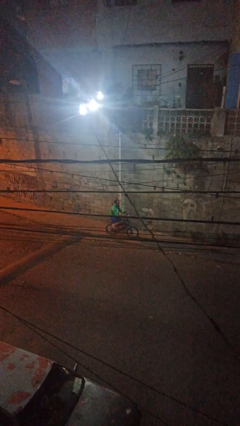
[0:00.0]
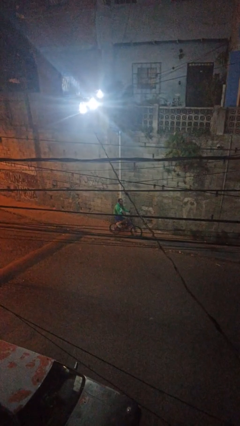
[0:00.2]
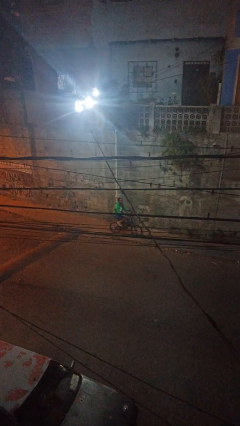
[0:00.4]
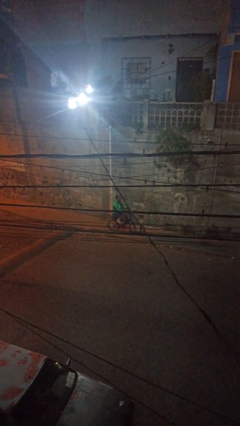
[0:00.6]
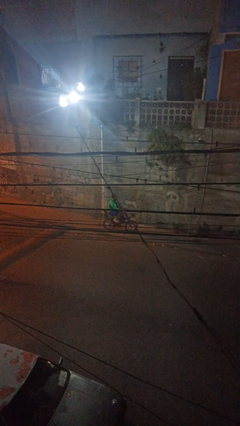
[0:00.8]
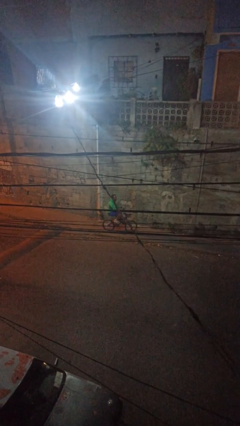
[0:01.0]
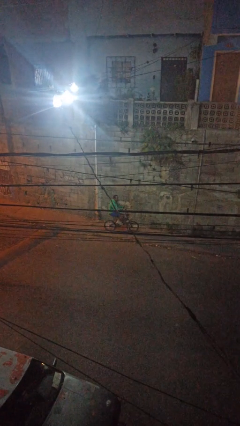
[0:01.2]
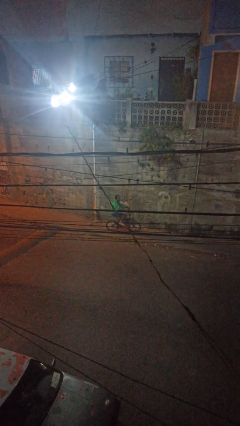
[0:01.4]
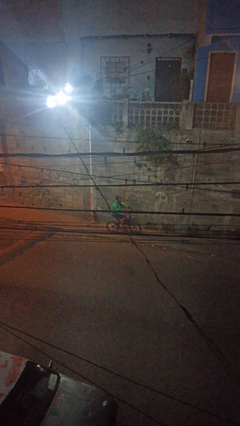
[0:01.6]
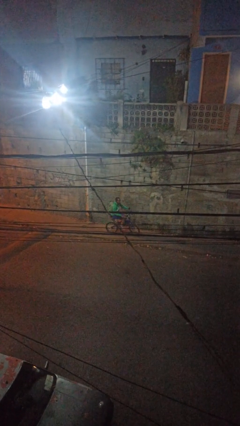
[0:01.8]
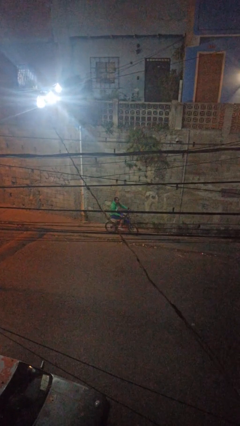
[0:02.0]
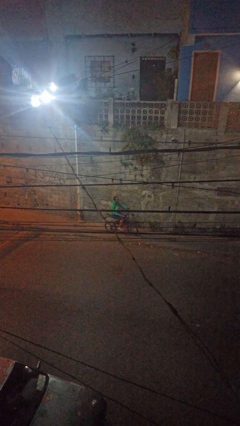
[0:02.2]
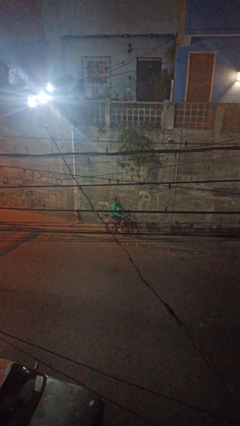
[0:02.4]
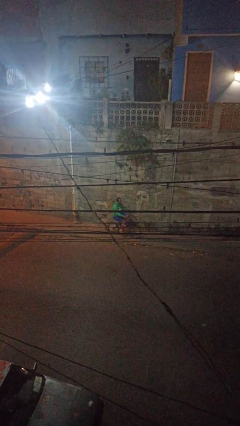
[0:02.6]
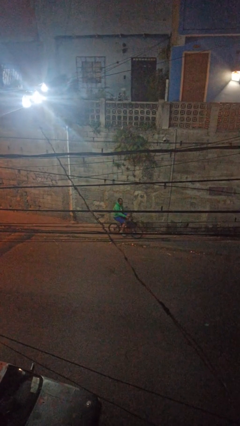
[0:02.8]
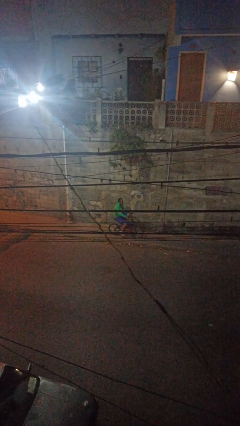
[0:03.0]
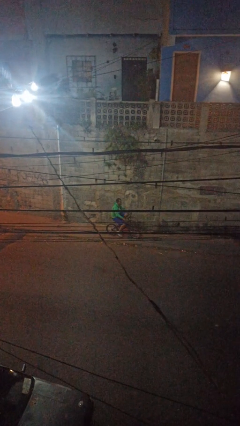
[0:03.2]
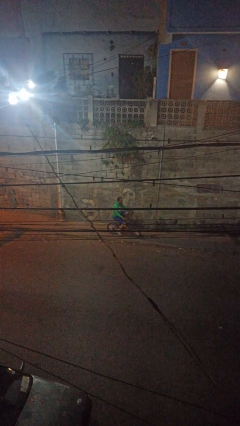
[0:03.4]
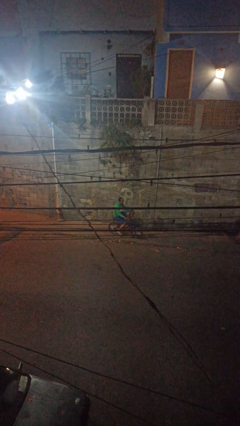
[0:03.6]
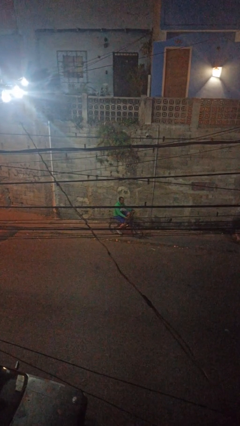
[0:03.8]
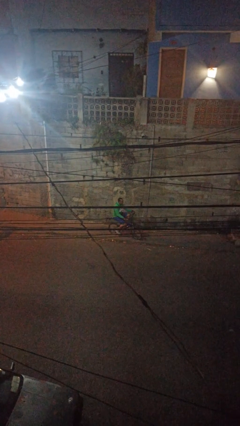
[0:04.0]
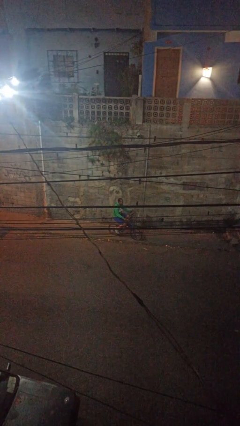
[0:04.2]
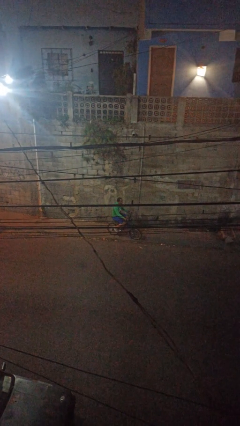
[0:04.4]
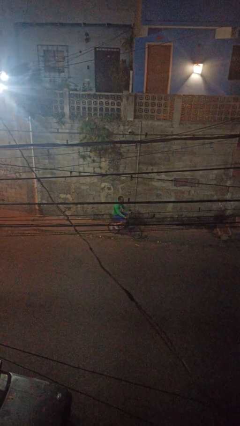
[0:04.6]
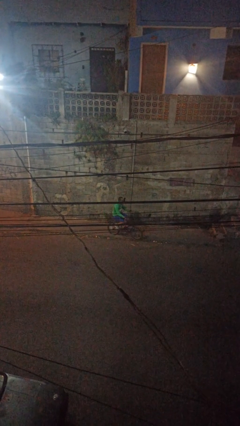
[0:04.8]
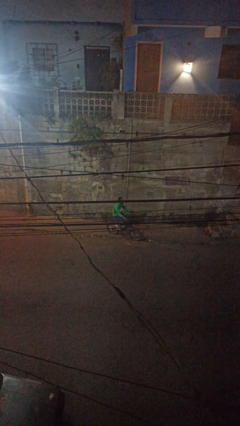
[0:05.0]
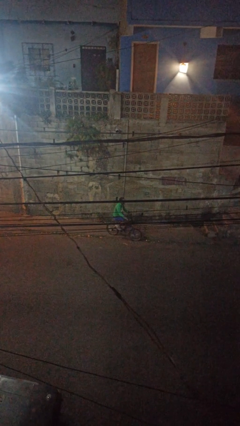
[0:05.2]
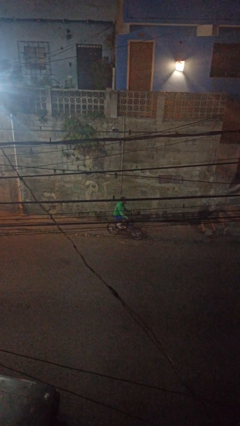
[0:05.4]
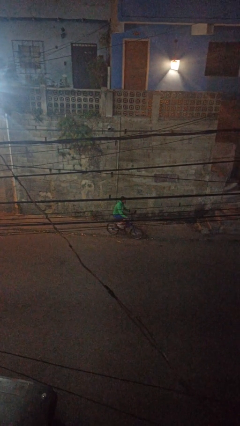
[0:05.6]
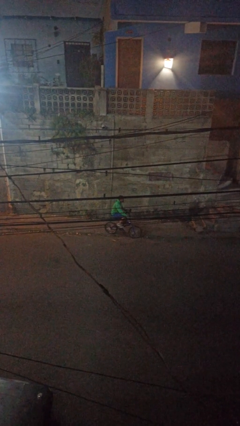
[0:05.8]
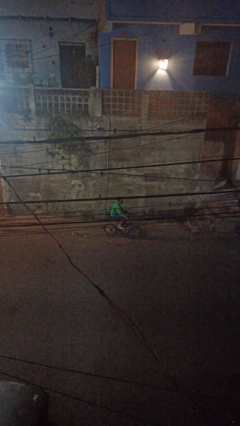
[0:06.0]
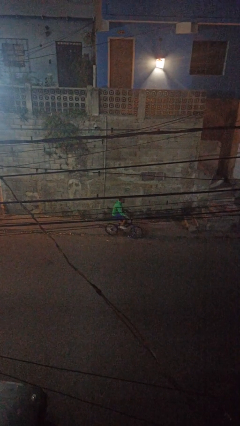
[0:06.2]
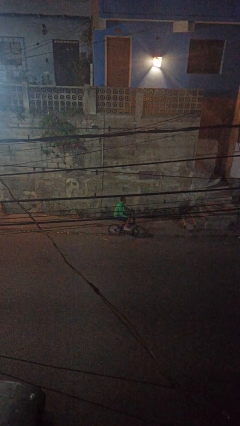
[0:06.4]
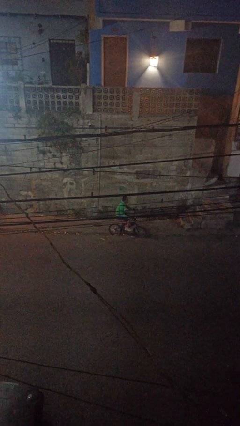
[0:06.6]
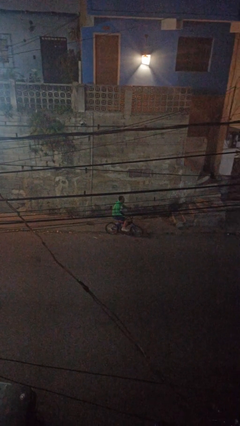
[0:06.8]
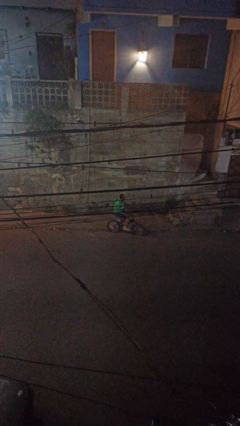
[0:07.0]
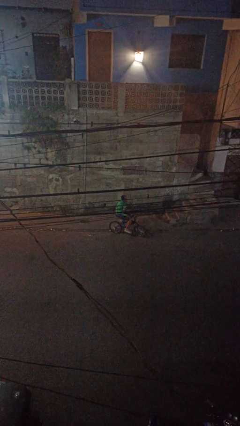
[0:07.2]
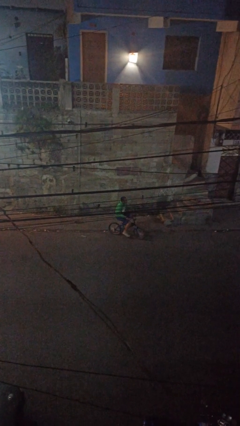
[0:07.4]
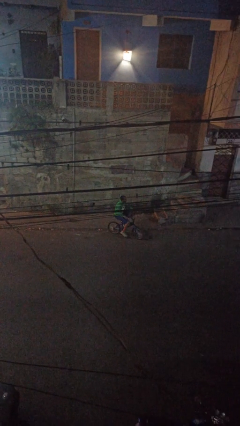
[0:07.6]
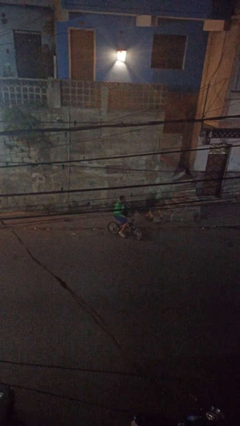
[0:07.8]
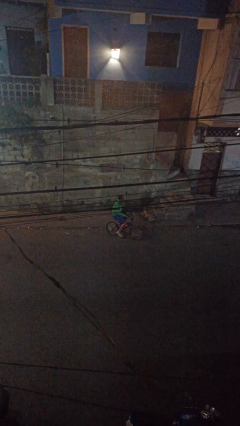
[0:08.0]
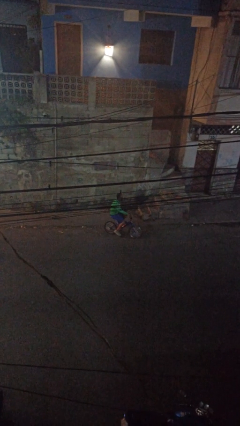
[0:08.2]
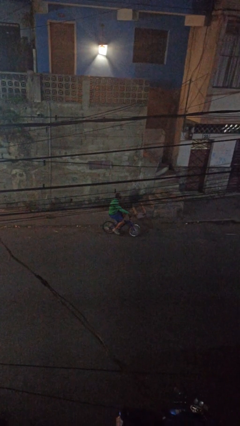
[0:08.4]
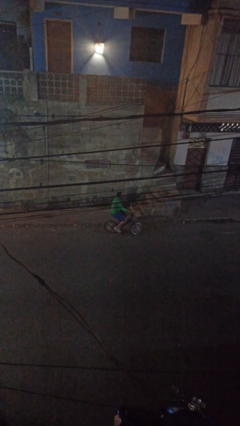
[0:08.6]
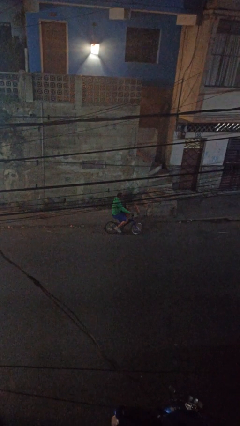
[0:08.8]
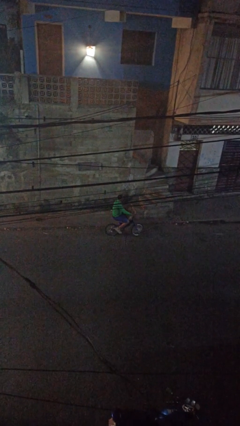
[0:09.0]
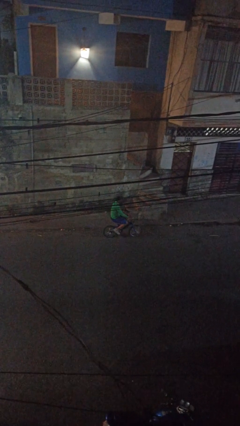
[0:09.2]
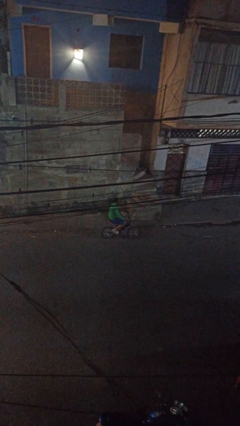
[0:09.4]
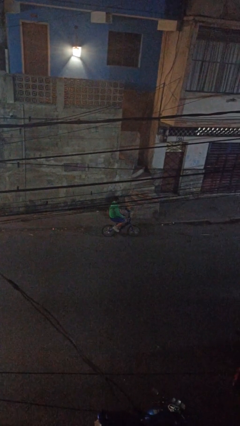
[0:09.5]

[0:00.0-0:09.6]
person rides bicycle

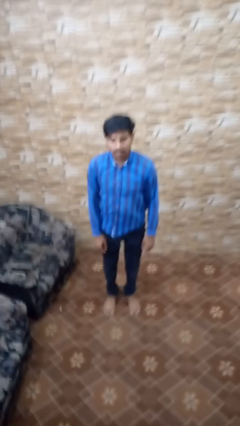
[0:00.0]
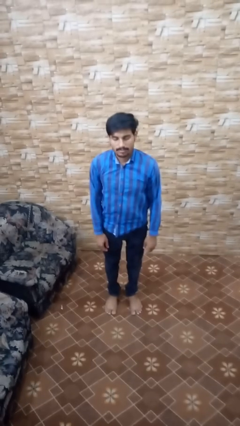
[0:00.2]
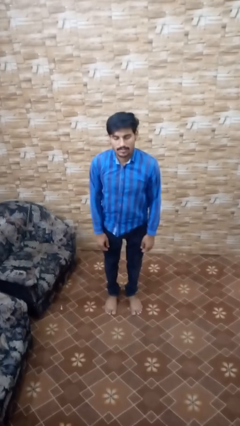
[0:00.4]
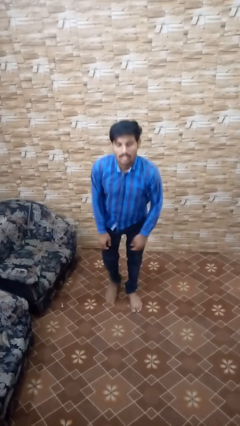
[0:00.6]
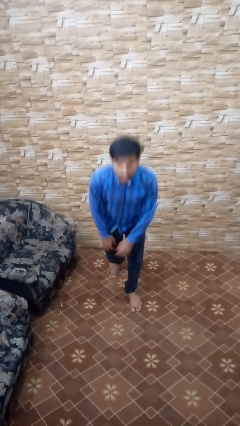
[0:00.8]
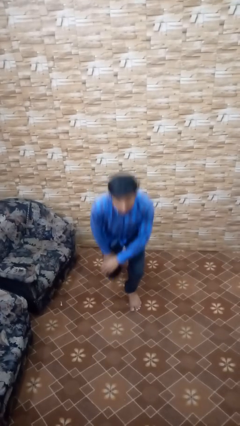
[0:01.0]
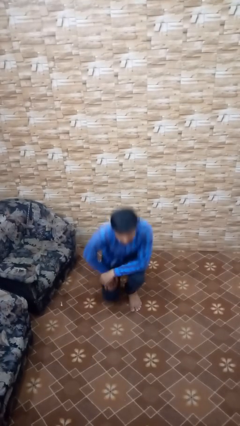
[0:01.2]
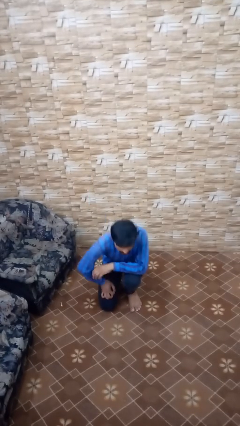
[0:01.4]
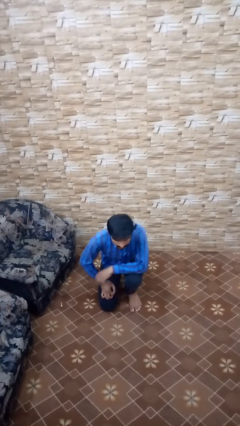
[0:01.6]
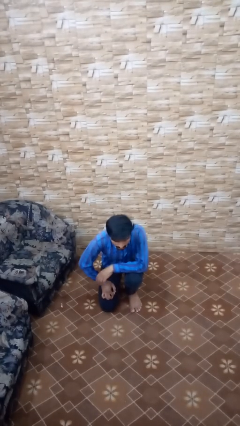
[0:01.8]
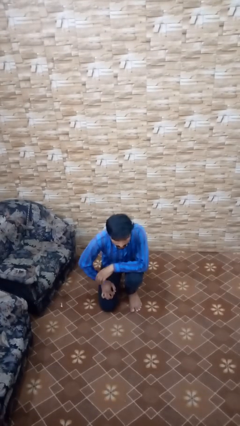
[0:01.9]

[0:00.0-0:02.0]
person kneels

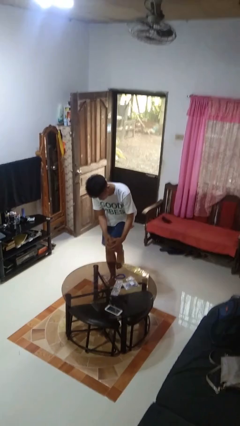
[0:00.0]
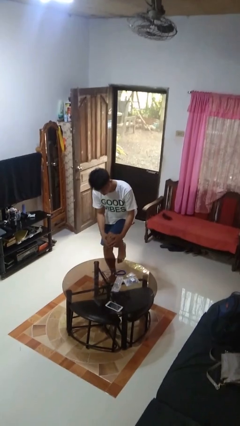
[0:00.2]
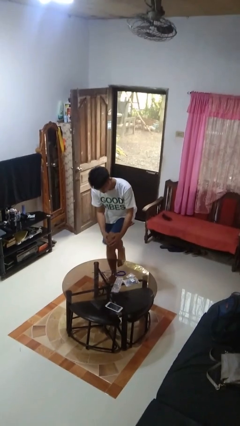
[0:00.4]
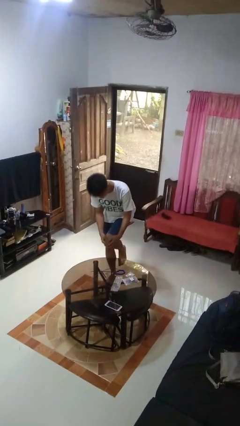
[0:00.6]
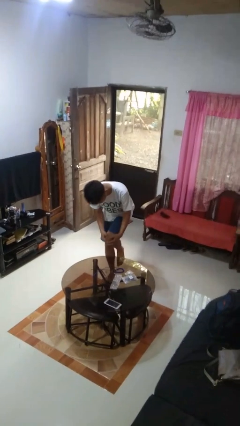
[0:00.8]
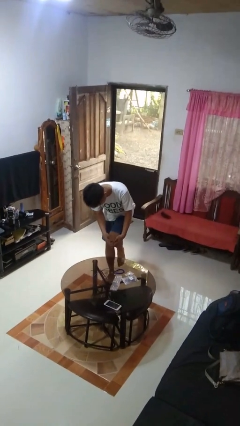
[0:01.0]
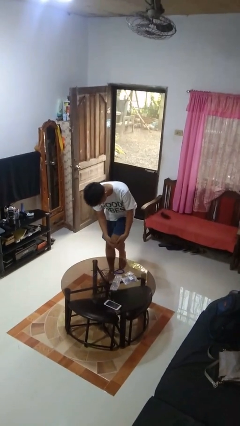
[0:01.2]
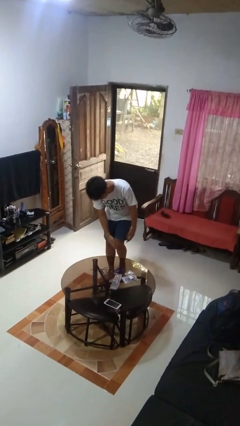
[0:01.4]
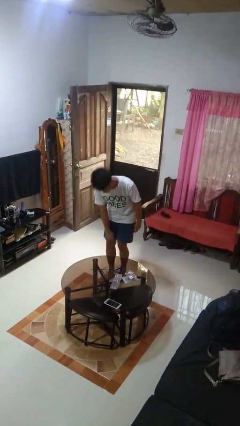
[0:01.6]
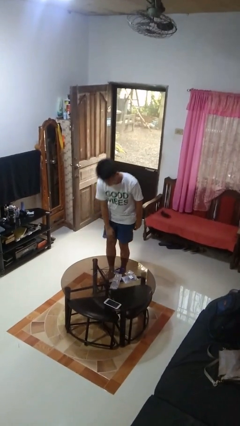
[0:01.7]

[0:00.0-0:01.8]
person bumps into table

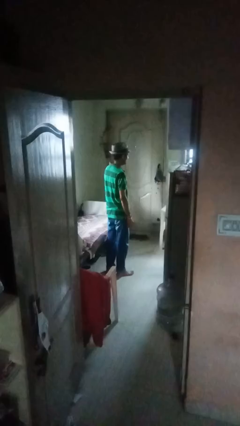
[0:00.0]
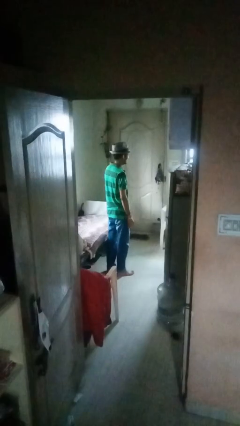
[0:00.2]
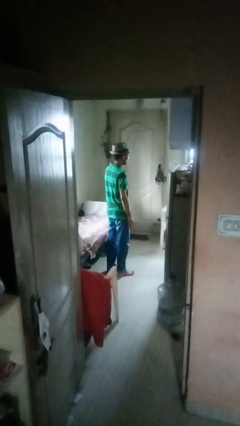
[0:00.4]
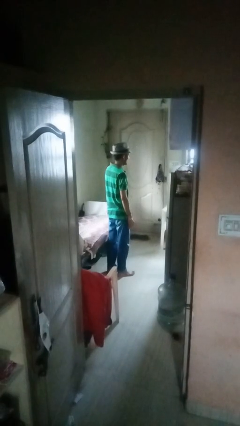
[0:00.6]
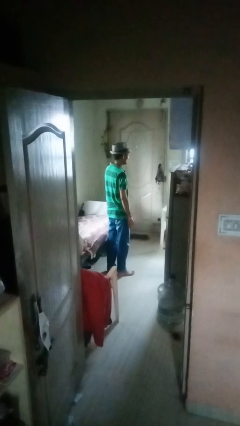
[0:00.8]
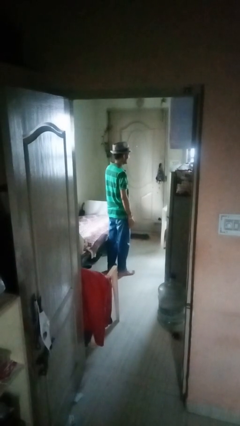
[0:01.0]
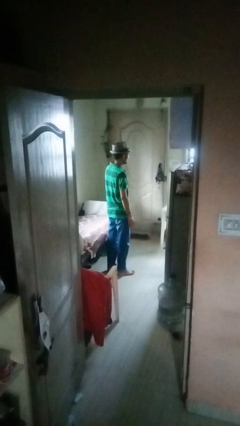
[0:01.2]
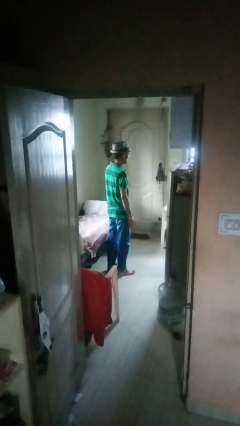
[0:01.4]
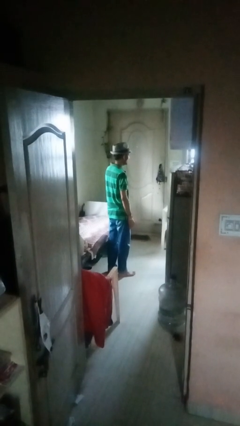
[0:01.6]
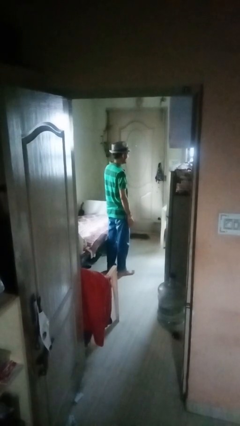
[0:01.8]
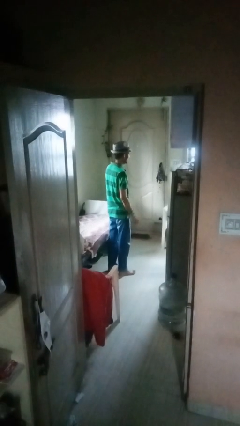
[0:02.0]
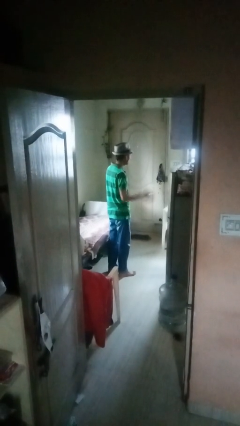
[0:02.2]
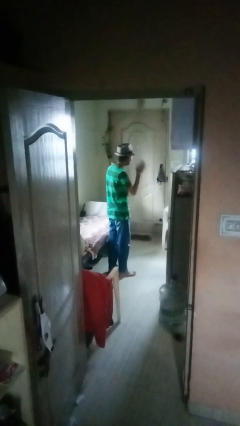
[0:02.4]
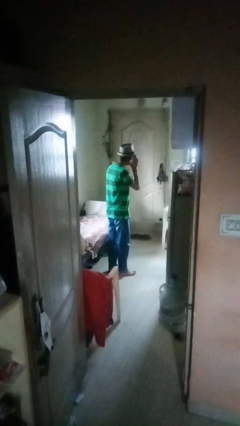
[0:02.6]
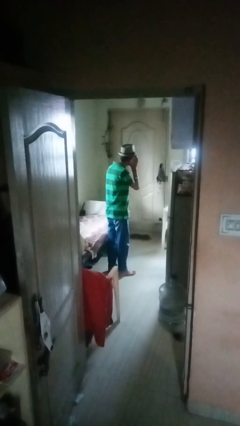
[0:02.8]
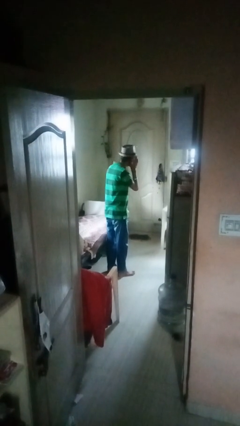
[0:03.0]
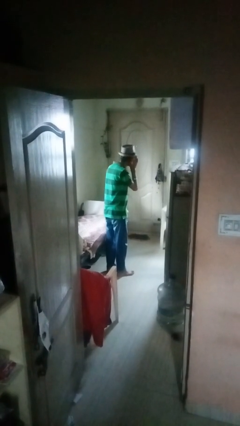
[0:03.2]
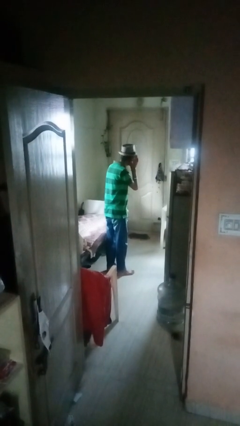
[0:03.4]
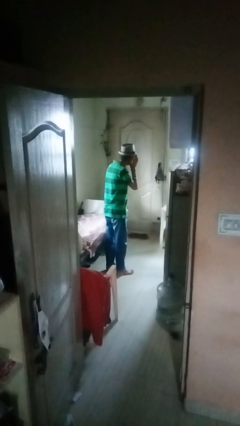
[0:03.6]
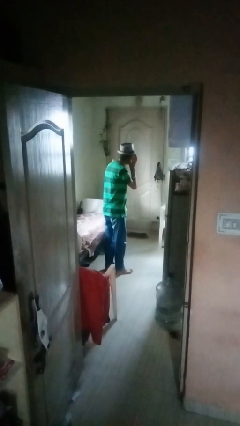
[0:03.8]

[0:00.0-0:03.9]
person gestures listen closely

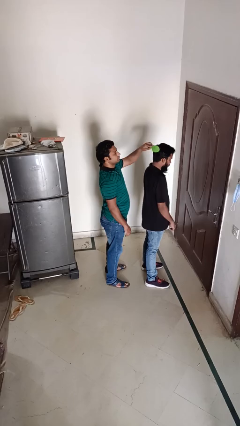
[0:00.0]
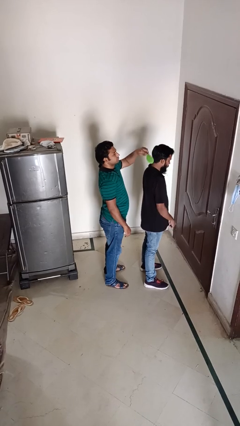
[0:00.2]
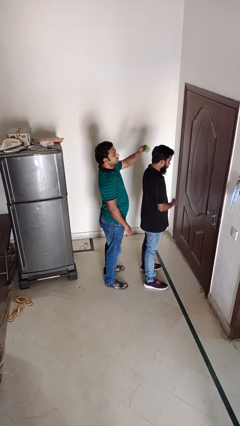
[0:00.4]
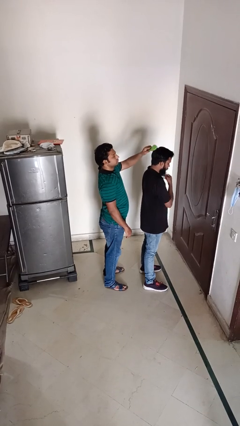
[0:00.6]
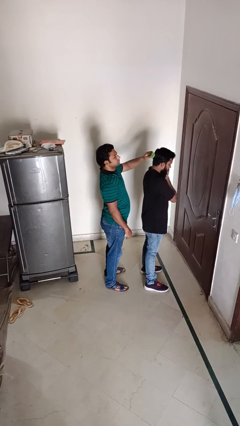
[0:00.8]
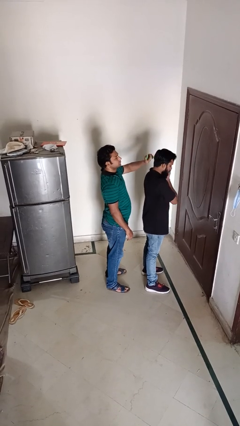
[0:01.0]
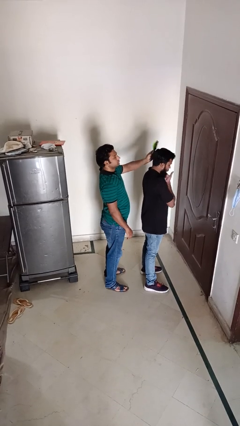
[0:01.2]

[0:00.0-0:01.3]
person brushes hair of person
